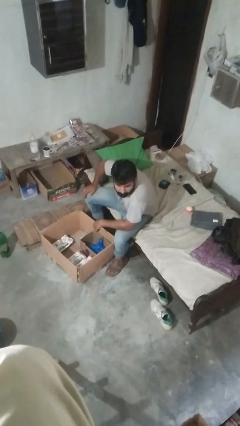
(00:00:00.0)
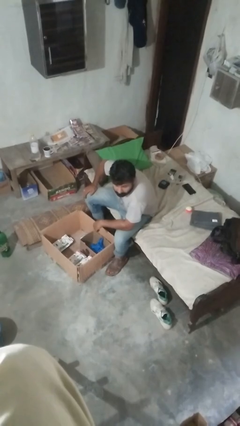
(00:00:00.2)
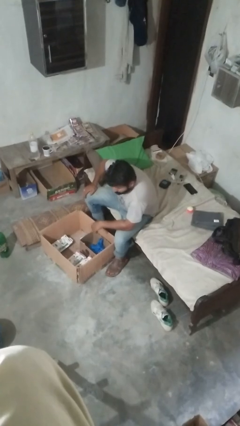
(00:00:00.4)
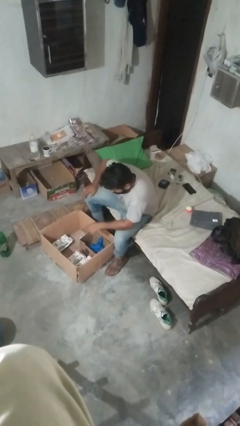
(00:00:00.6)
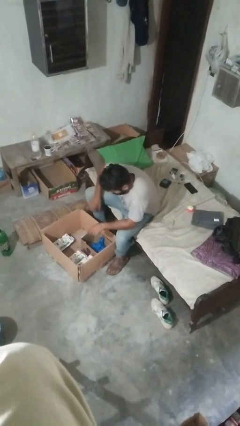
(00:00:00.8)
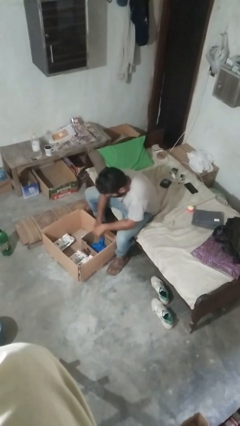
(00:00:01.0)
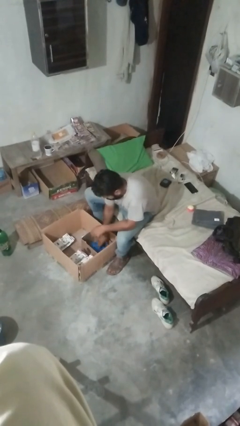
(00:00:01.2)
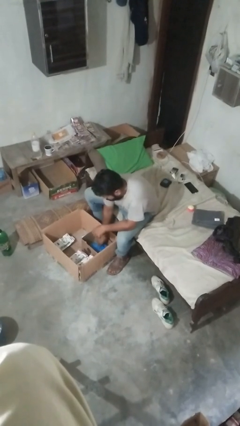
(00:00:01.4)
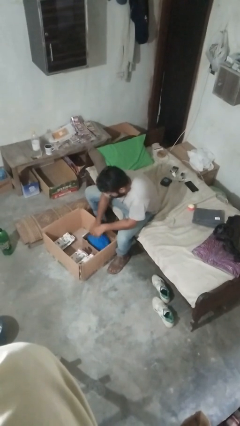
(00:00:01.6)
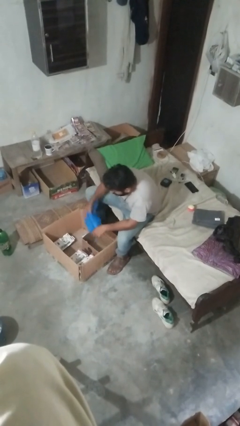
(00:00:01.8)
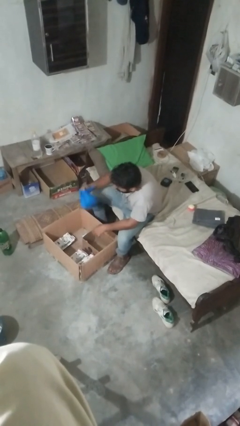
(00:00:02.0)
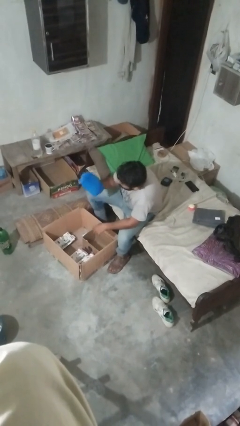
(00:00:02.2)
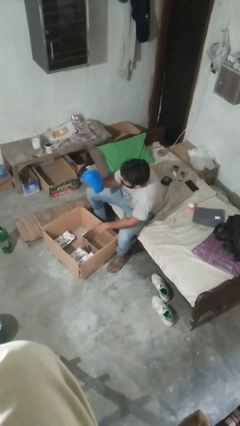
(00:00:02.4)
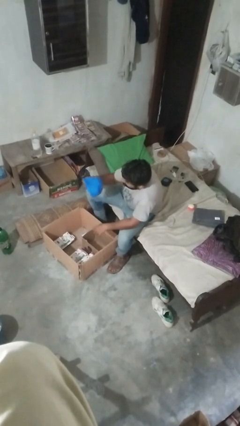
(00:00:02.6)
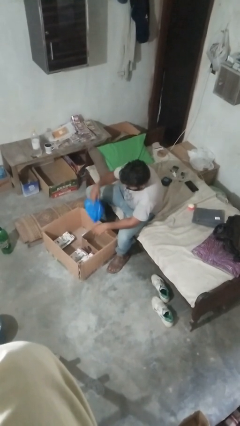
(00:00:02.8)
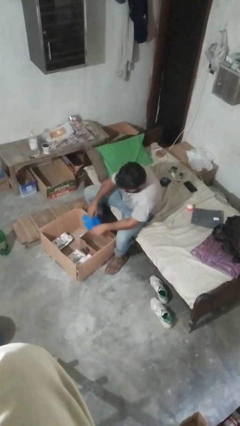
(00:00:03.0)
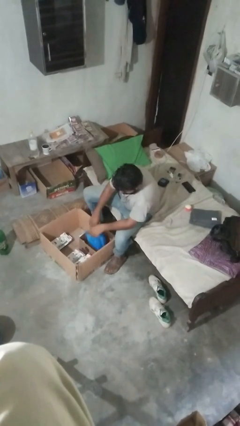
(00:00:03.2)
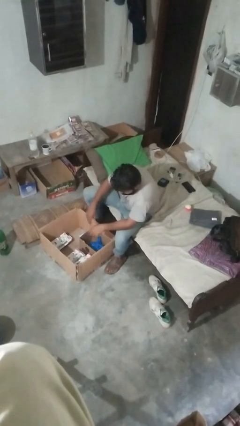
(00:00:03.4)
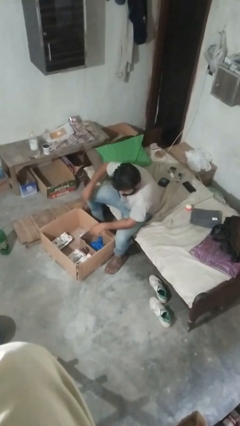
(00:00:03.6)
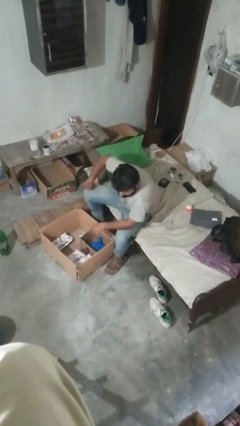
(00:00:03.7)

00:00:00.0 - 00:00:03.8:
person searches in box

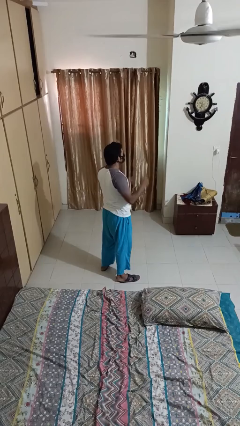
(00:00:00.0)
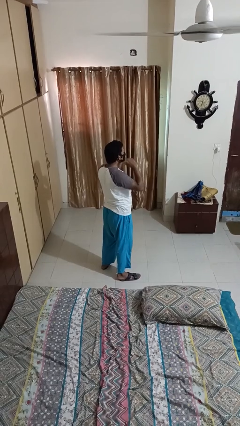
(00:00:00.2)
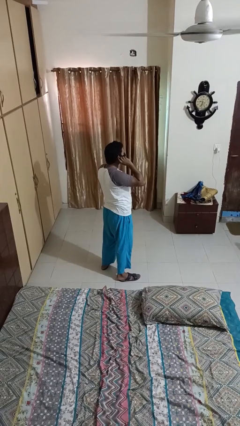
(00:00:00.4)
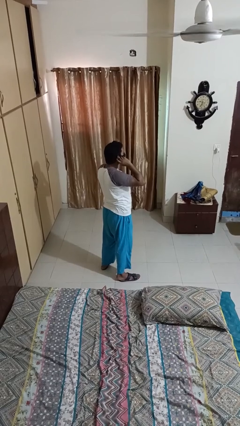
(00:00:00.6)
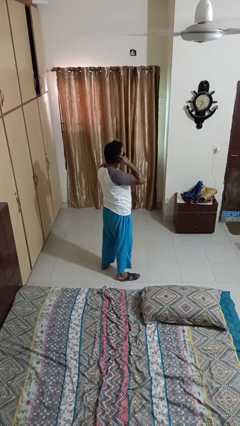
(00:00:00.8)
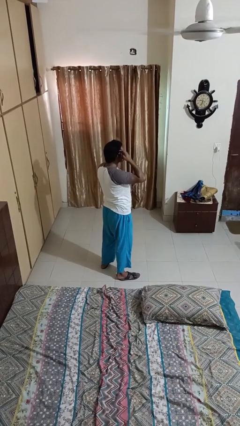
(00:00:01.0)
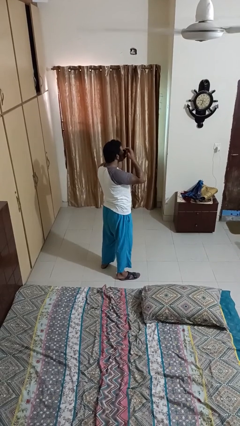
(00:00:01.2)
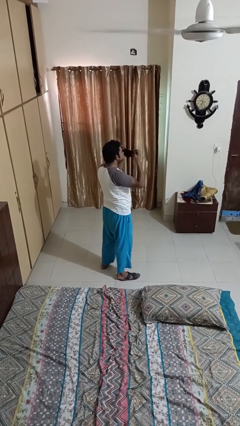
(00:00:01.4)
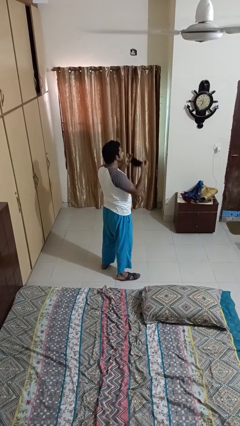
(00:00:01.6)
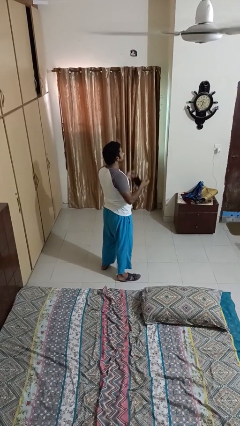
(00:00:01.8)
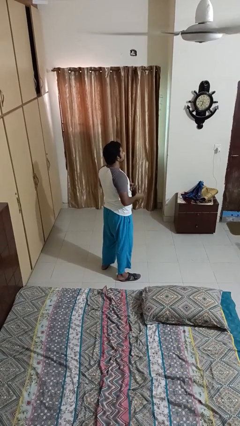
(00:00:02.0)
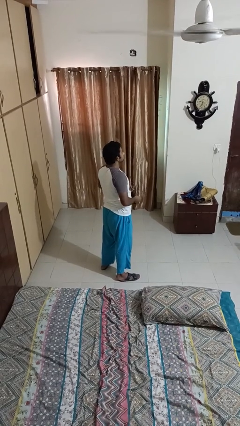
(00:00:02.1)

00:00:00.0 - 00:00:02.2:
person takes off facemask

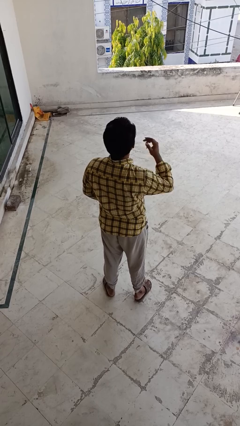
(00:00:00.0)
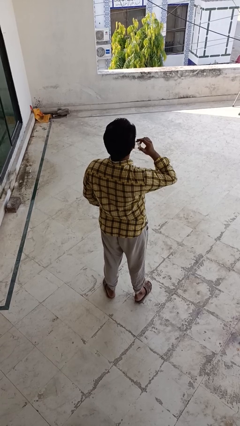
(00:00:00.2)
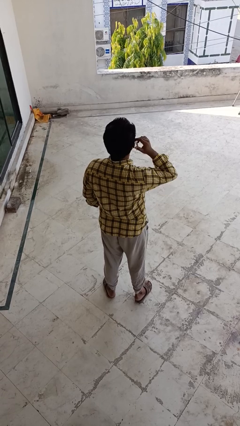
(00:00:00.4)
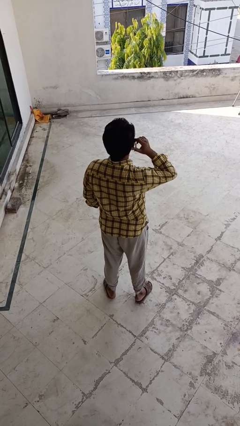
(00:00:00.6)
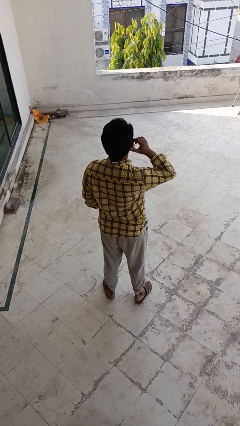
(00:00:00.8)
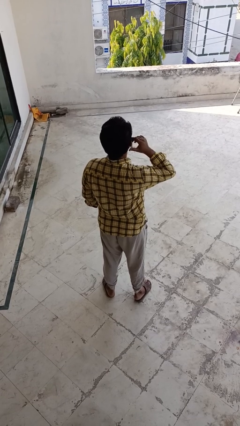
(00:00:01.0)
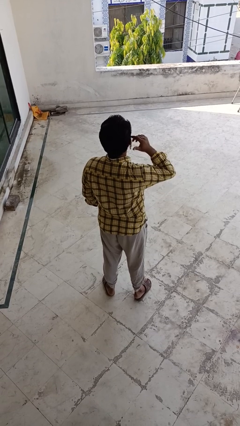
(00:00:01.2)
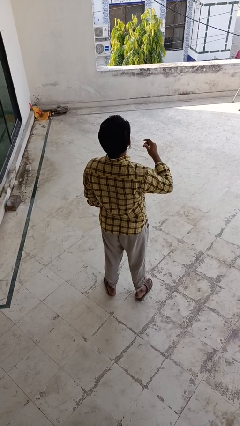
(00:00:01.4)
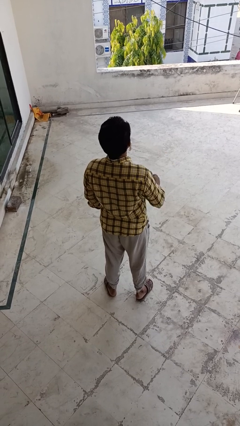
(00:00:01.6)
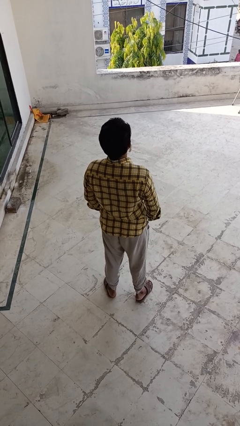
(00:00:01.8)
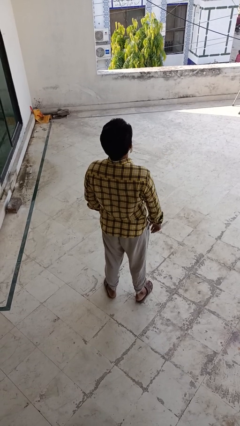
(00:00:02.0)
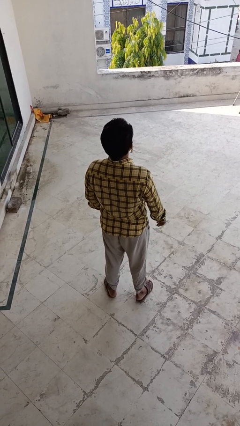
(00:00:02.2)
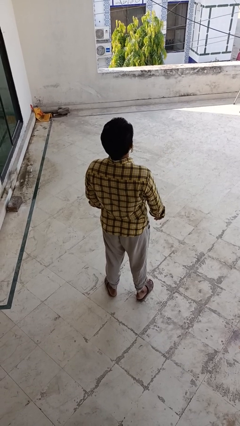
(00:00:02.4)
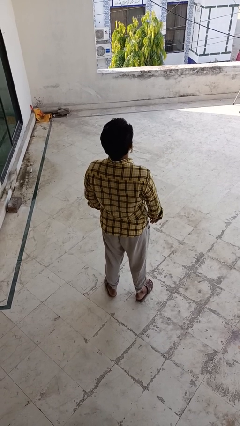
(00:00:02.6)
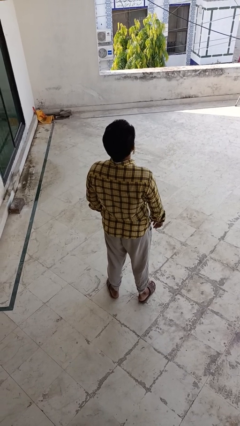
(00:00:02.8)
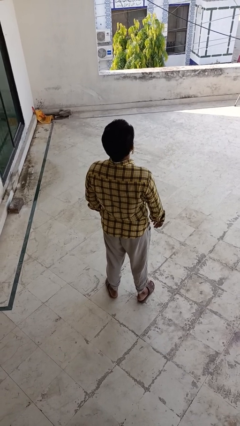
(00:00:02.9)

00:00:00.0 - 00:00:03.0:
person puts on earrings

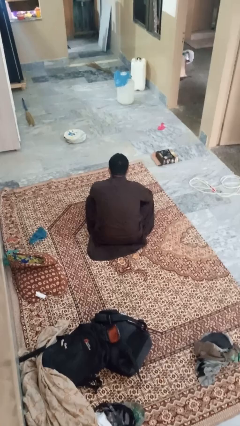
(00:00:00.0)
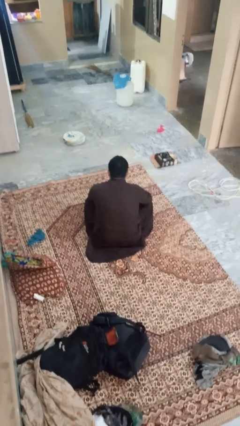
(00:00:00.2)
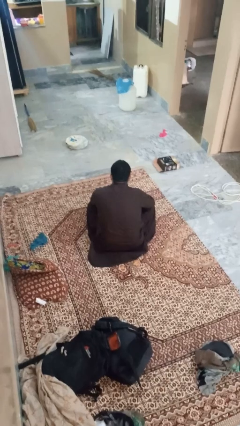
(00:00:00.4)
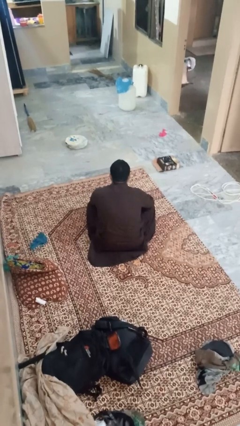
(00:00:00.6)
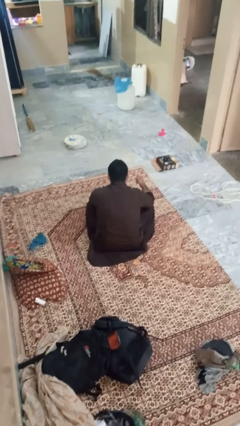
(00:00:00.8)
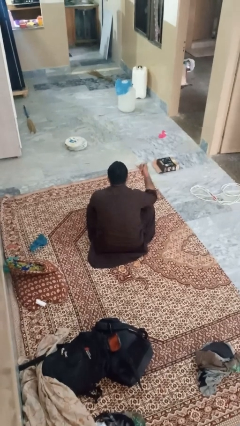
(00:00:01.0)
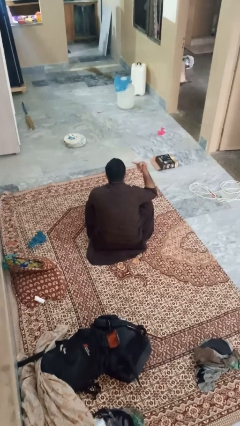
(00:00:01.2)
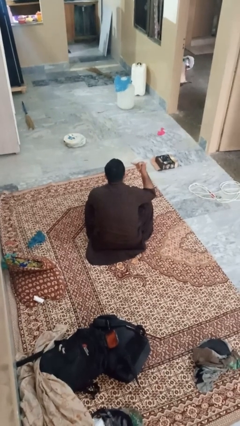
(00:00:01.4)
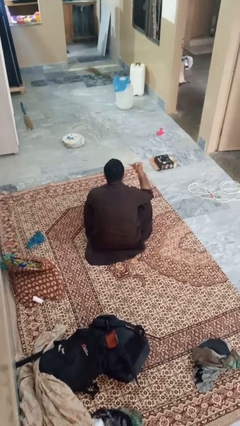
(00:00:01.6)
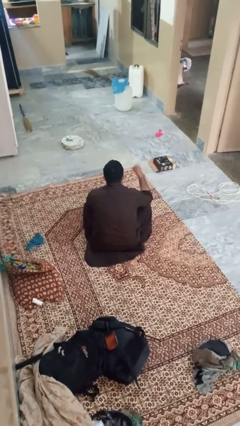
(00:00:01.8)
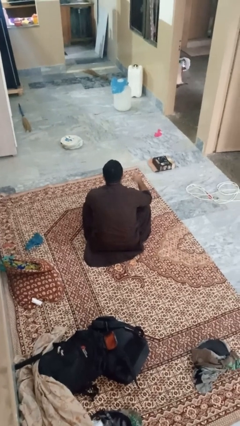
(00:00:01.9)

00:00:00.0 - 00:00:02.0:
person gestures hang loose

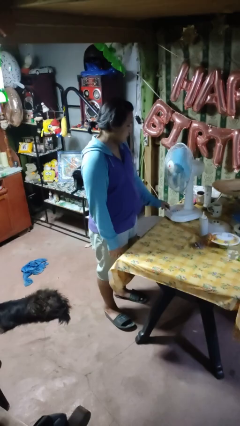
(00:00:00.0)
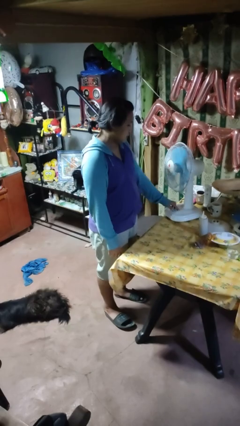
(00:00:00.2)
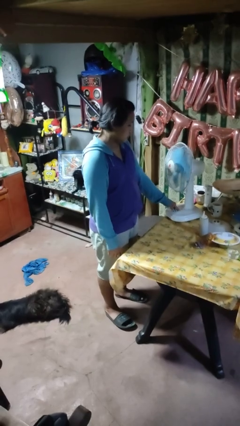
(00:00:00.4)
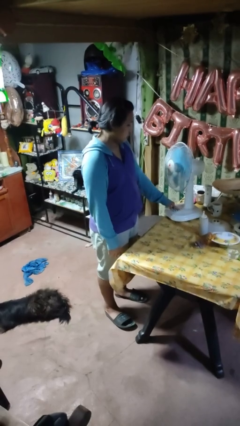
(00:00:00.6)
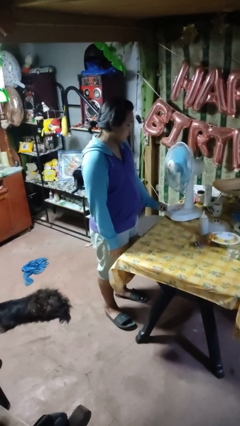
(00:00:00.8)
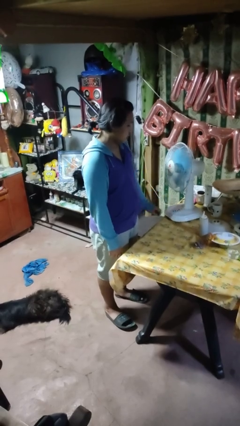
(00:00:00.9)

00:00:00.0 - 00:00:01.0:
person turns on fan

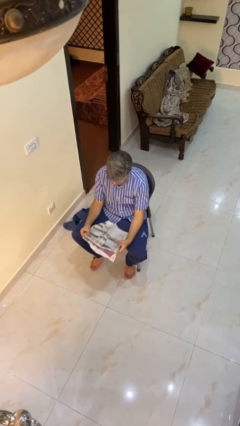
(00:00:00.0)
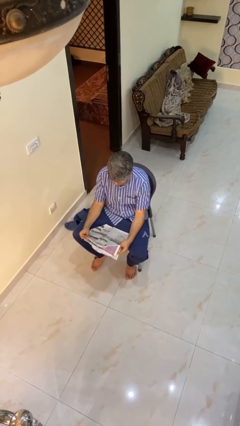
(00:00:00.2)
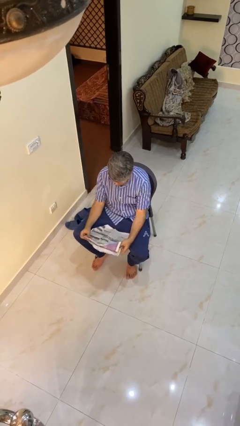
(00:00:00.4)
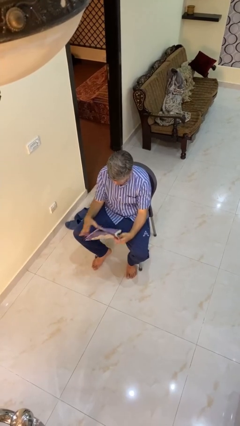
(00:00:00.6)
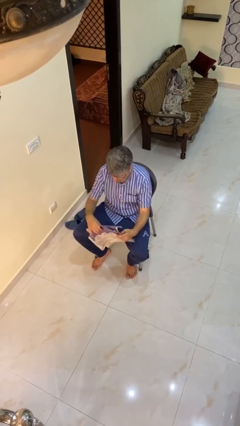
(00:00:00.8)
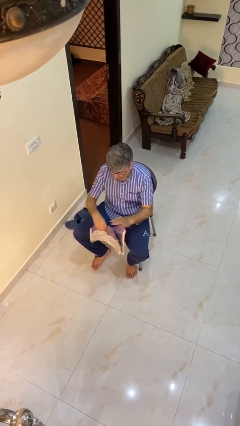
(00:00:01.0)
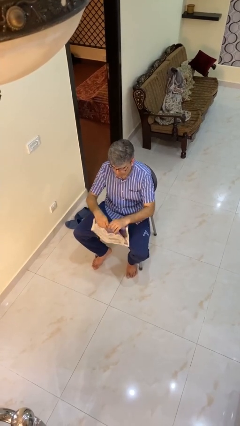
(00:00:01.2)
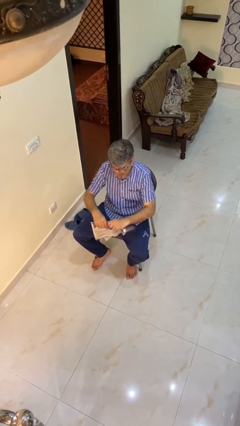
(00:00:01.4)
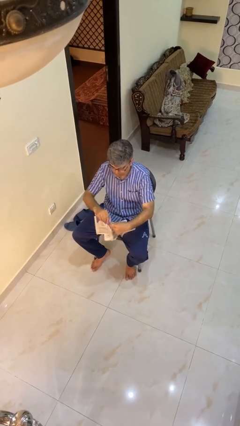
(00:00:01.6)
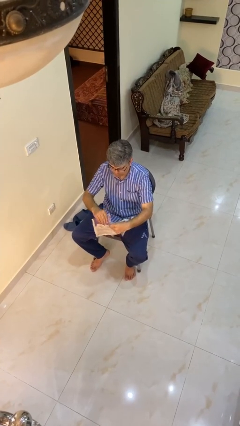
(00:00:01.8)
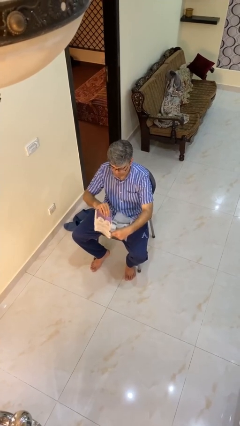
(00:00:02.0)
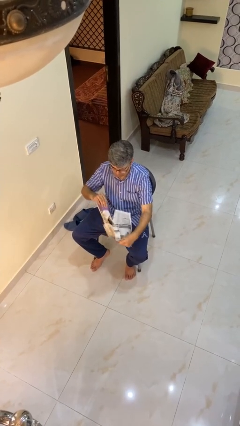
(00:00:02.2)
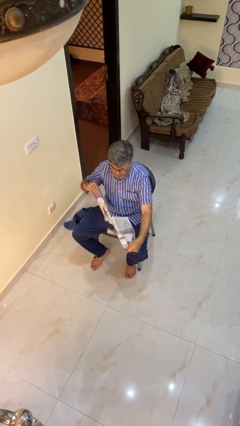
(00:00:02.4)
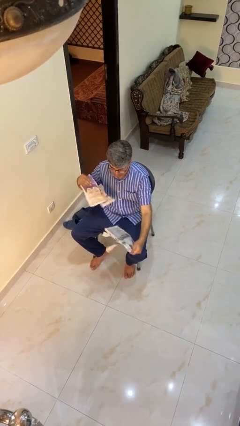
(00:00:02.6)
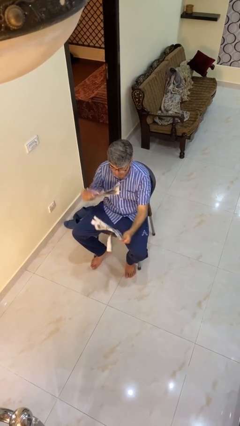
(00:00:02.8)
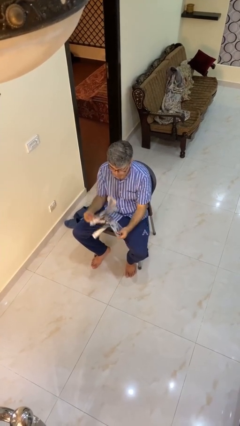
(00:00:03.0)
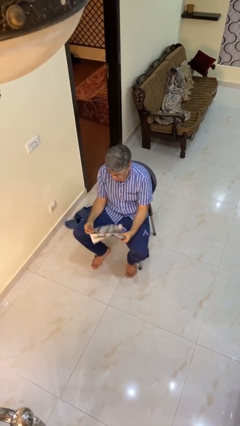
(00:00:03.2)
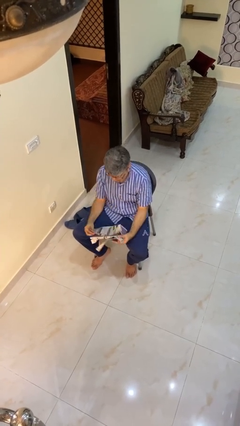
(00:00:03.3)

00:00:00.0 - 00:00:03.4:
person tears paper

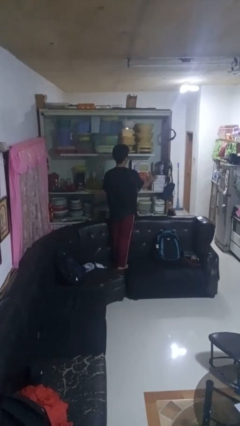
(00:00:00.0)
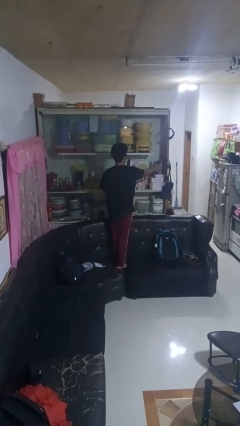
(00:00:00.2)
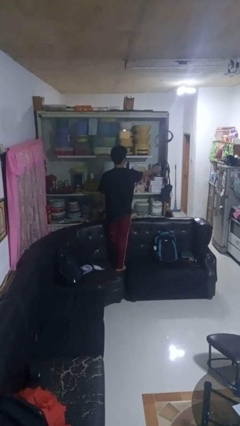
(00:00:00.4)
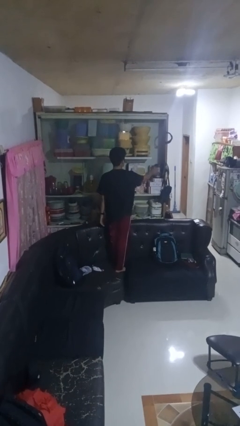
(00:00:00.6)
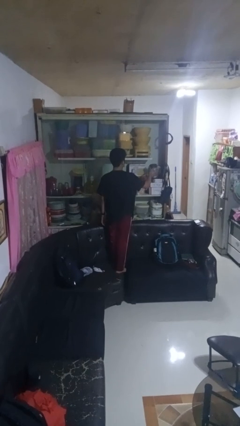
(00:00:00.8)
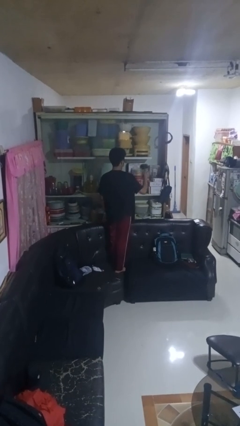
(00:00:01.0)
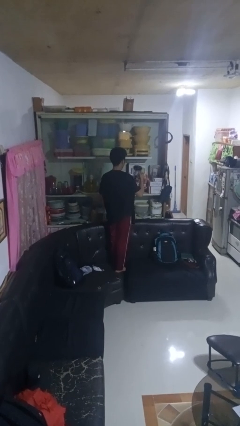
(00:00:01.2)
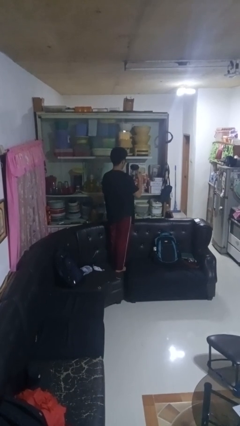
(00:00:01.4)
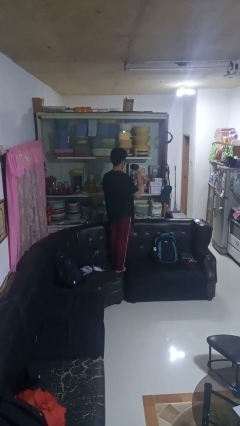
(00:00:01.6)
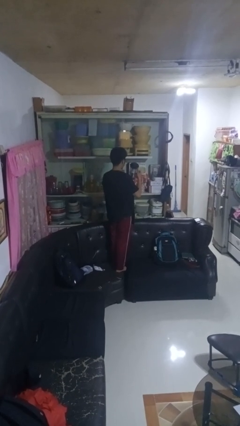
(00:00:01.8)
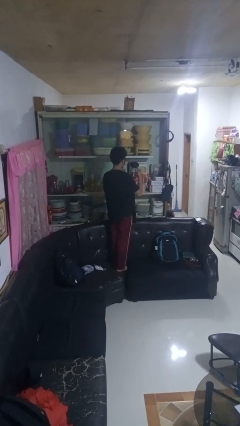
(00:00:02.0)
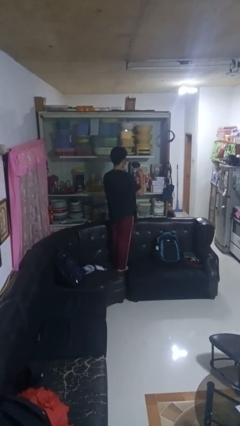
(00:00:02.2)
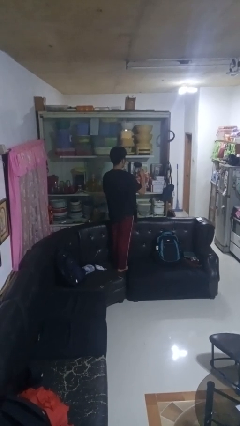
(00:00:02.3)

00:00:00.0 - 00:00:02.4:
person picks up object from cabinet
